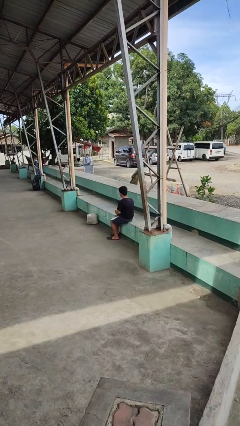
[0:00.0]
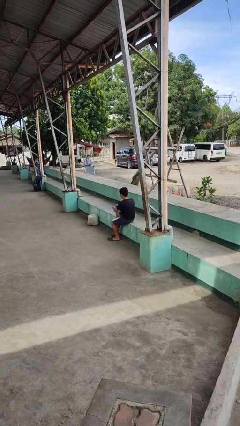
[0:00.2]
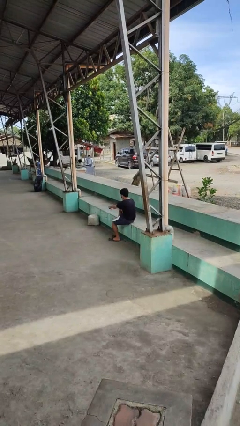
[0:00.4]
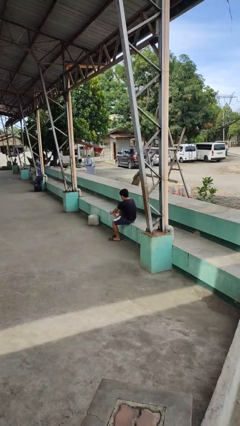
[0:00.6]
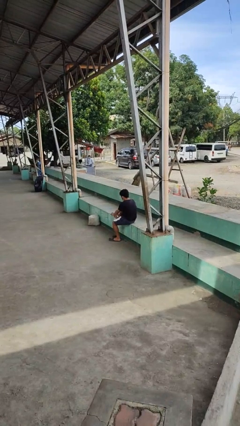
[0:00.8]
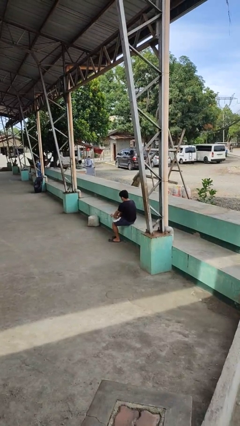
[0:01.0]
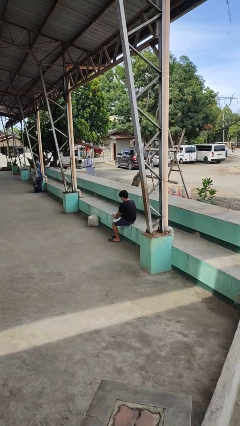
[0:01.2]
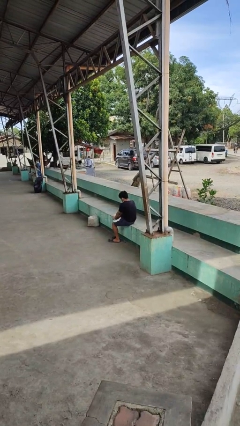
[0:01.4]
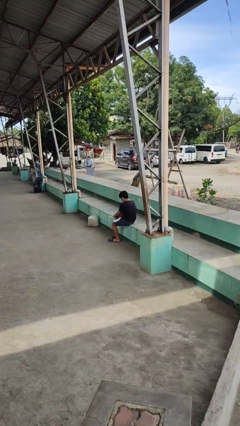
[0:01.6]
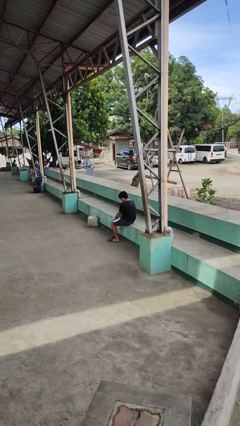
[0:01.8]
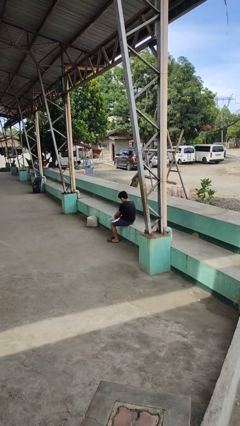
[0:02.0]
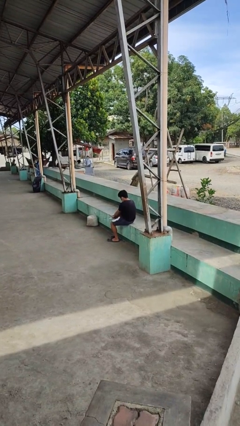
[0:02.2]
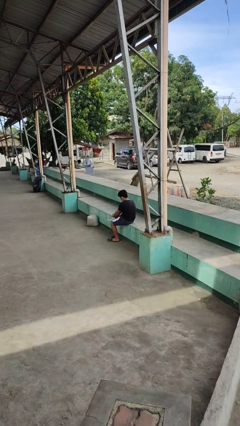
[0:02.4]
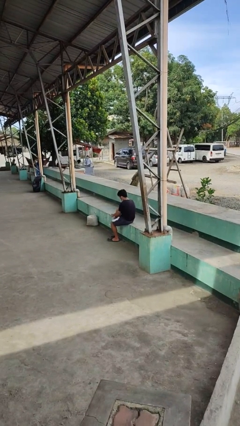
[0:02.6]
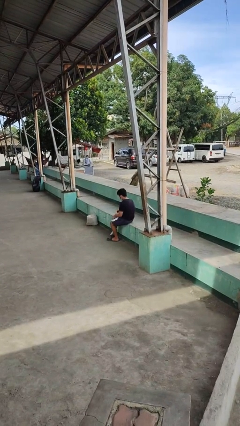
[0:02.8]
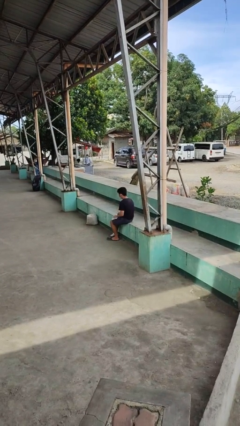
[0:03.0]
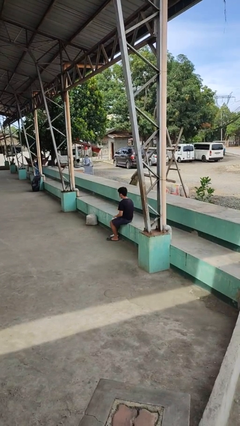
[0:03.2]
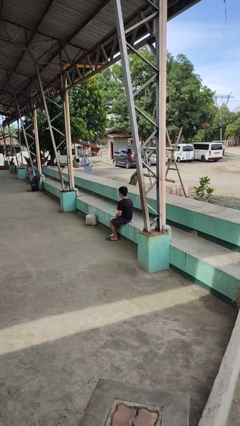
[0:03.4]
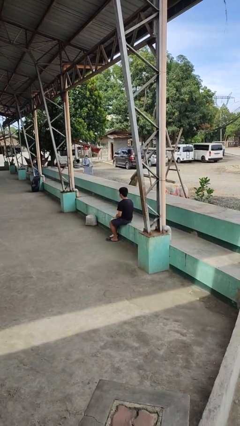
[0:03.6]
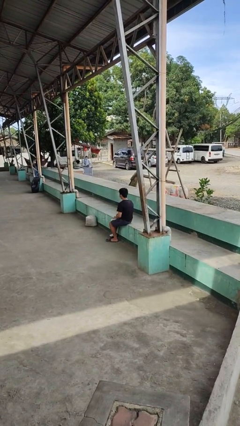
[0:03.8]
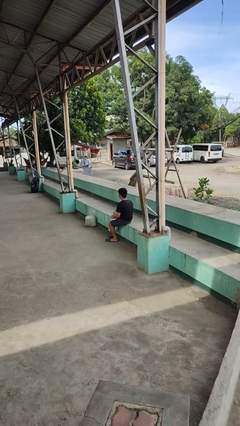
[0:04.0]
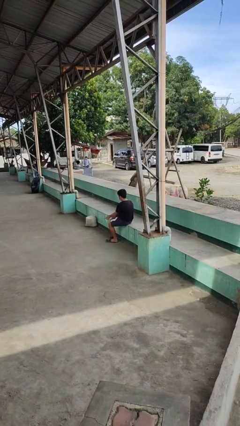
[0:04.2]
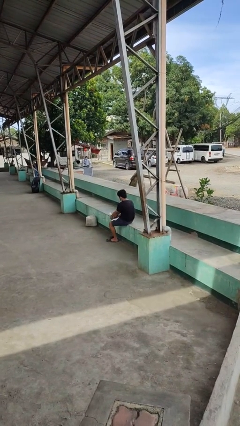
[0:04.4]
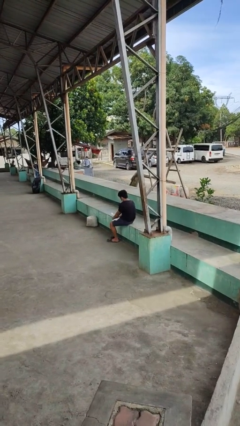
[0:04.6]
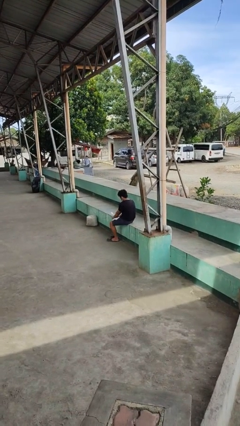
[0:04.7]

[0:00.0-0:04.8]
person puts on socks

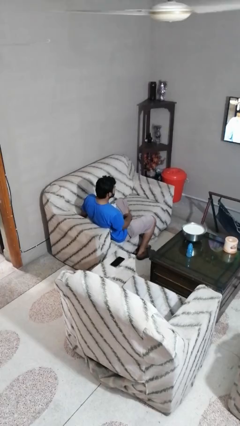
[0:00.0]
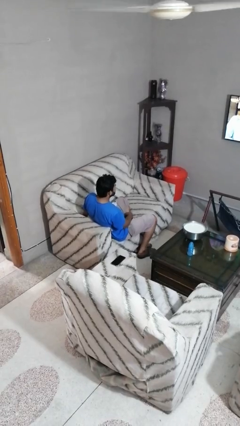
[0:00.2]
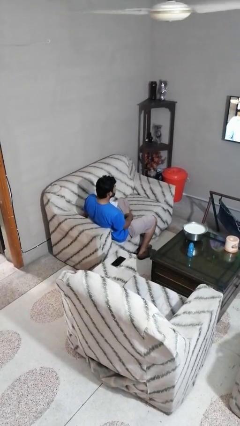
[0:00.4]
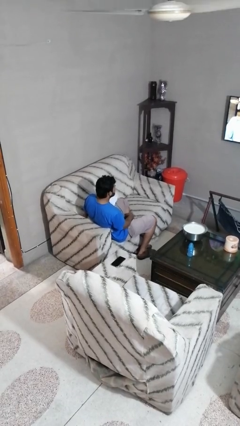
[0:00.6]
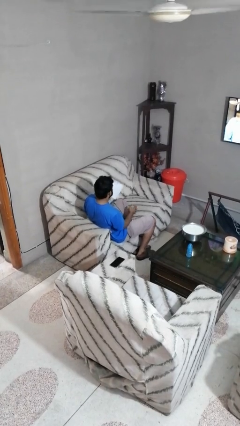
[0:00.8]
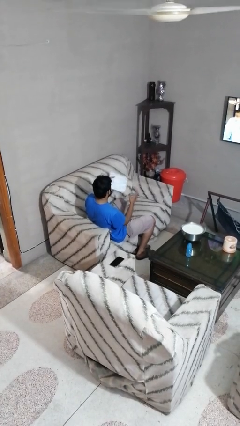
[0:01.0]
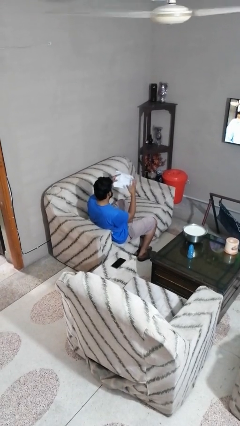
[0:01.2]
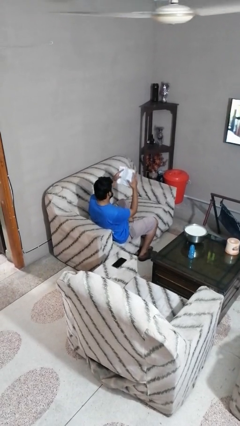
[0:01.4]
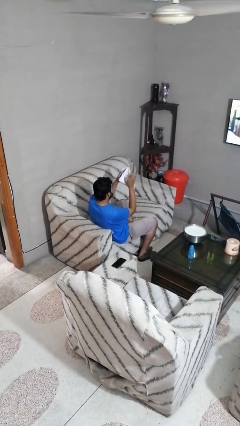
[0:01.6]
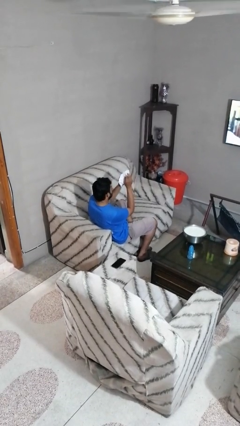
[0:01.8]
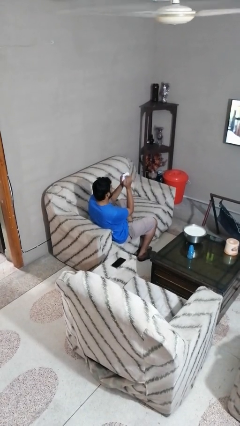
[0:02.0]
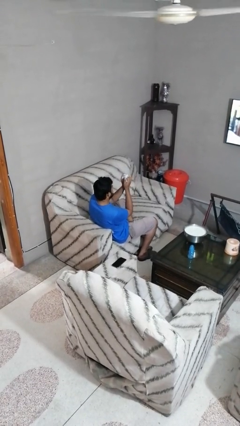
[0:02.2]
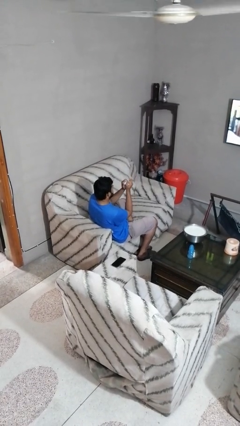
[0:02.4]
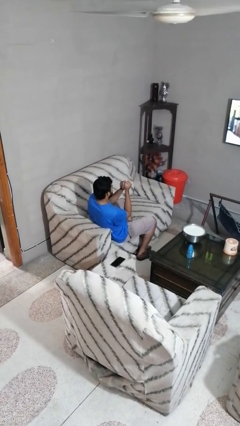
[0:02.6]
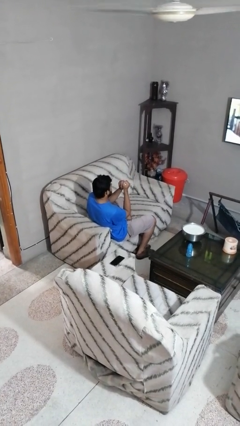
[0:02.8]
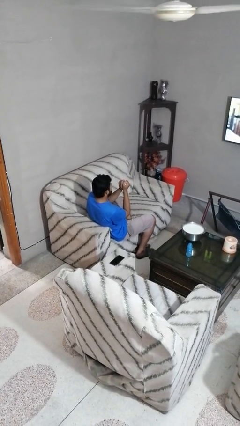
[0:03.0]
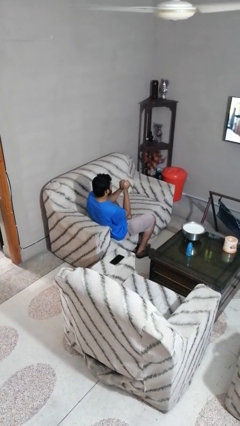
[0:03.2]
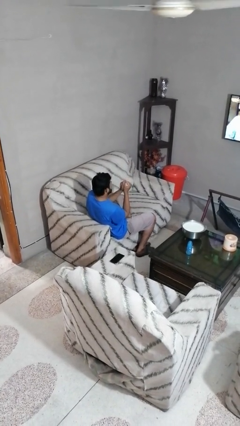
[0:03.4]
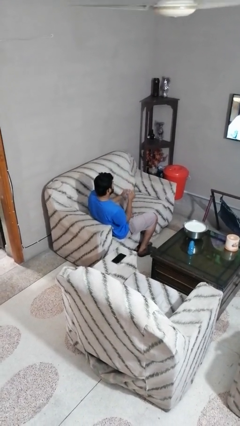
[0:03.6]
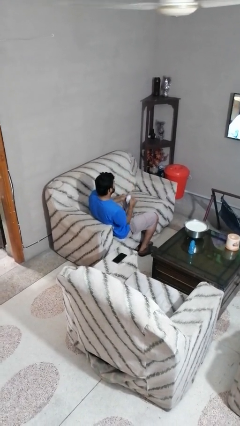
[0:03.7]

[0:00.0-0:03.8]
person crumples paper

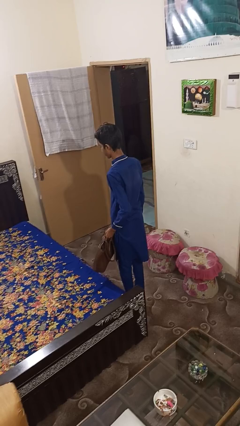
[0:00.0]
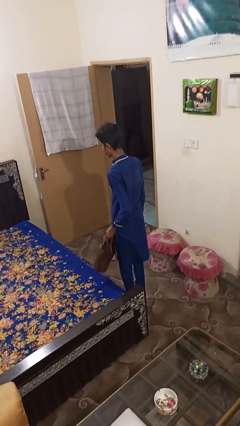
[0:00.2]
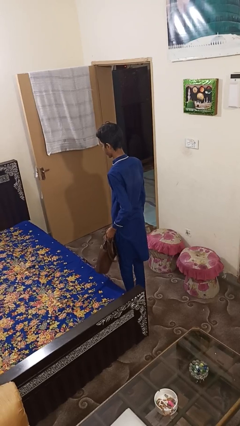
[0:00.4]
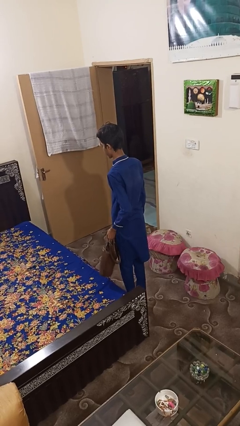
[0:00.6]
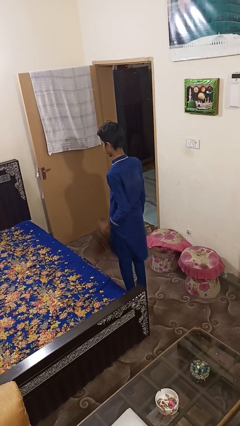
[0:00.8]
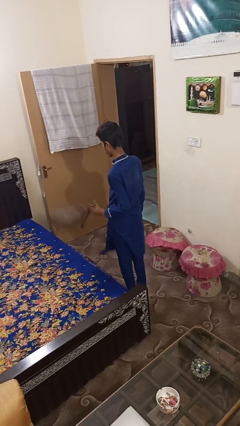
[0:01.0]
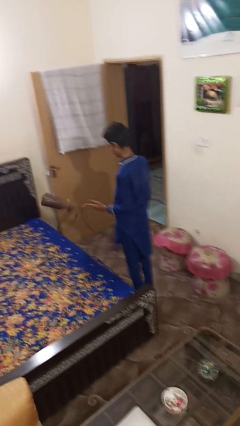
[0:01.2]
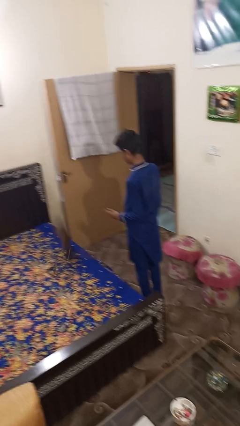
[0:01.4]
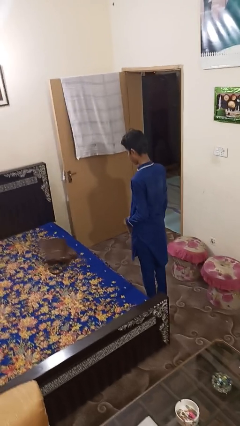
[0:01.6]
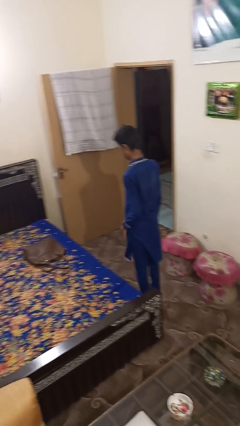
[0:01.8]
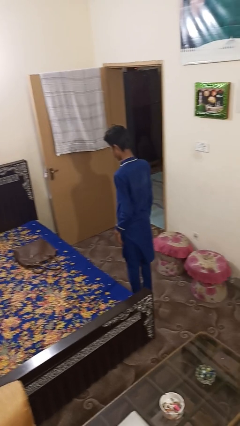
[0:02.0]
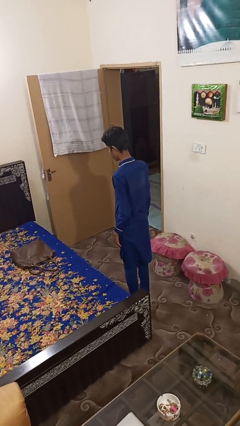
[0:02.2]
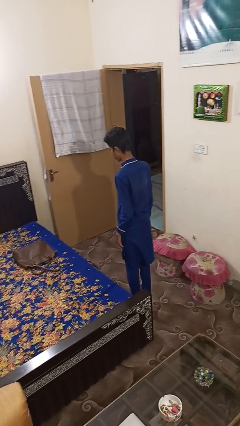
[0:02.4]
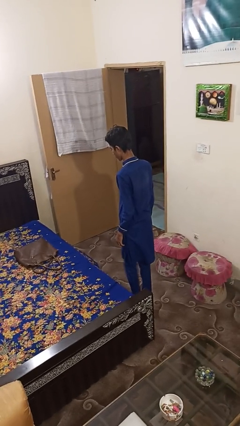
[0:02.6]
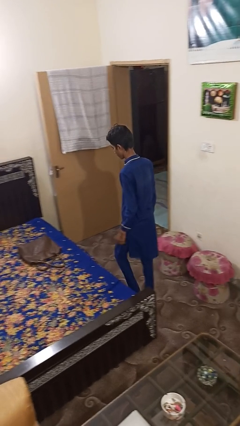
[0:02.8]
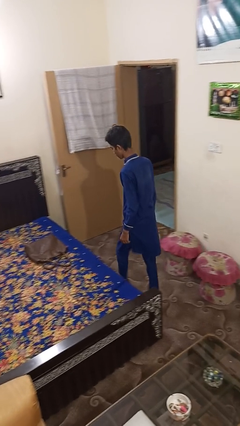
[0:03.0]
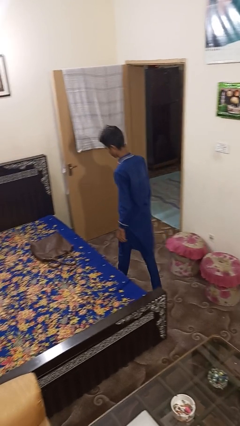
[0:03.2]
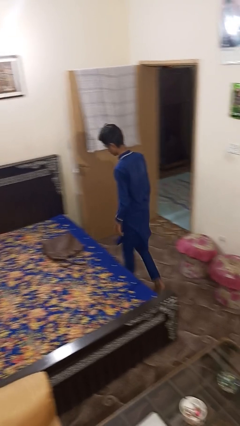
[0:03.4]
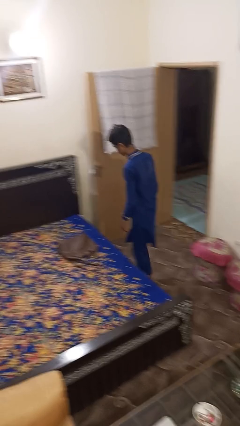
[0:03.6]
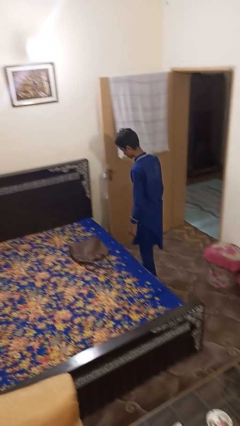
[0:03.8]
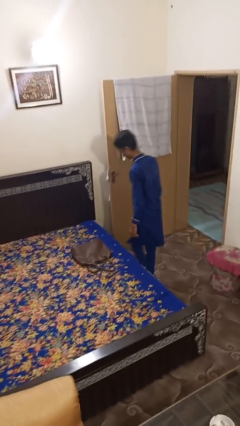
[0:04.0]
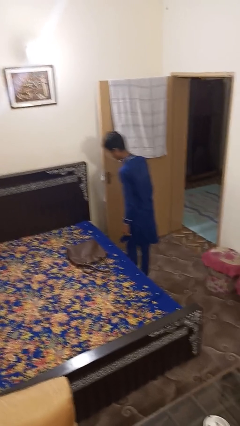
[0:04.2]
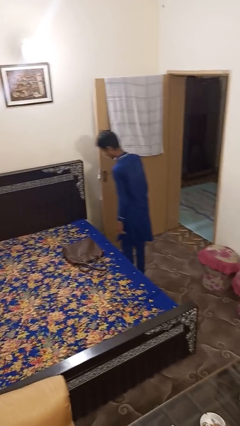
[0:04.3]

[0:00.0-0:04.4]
person throws object on bed

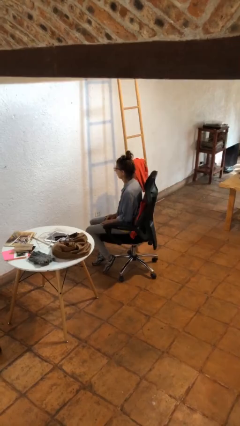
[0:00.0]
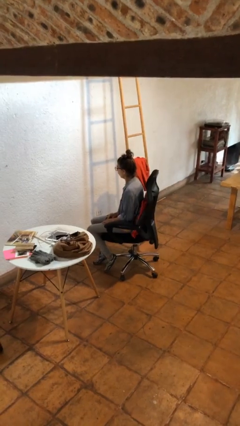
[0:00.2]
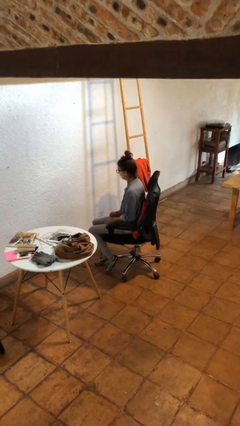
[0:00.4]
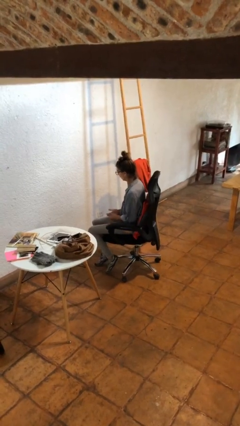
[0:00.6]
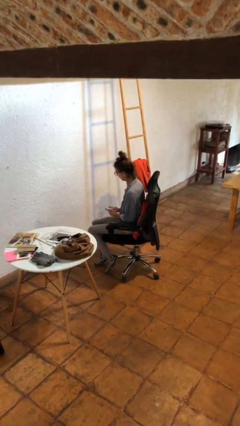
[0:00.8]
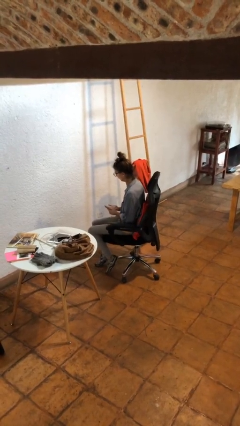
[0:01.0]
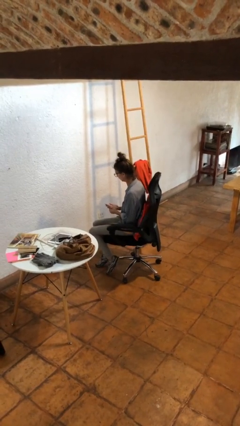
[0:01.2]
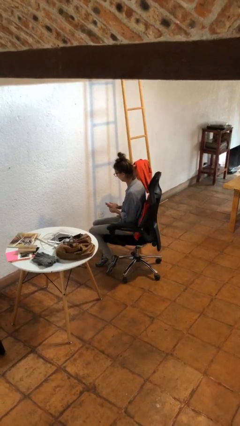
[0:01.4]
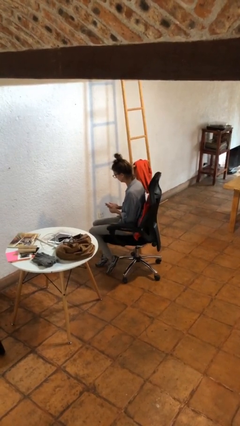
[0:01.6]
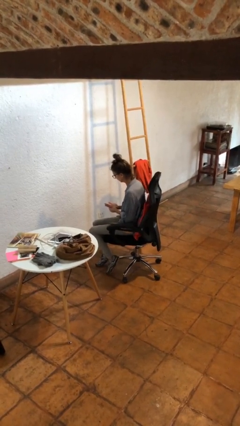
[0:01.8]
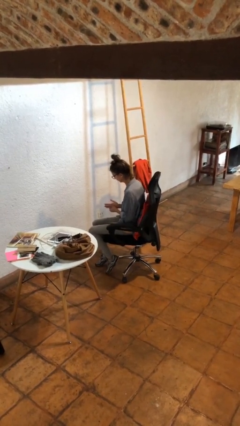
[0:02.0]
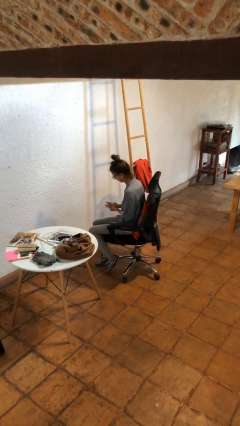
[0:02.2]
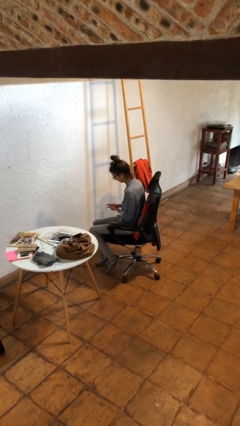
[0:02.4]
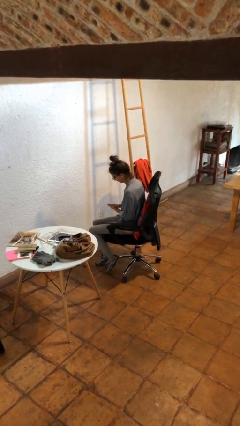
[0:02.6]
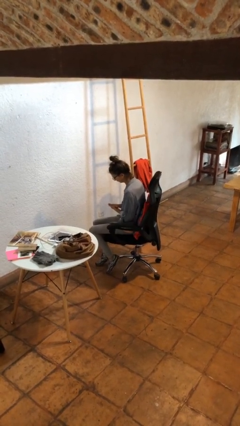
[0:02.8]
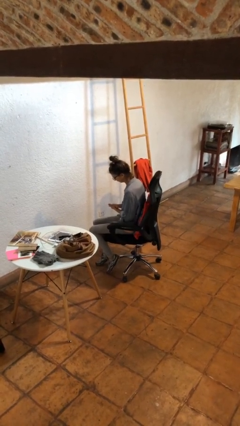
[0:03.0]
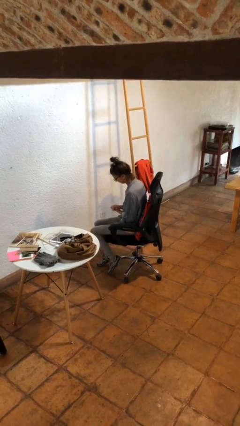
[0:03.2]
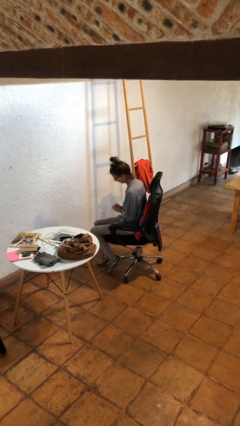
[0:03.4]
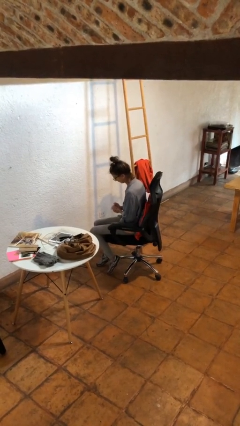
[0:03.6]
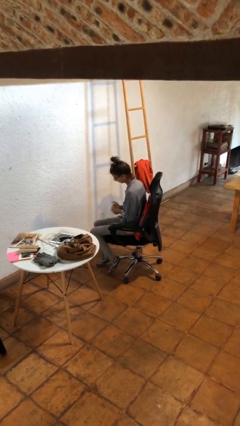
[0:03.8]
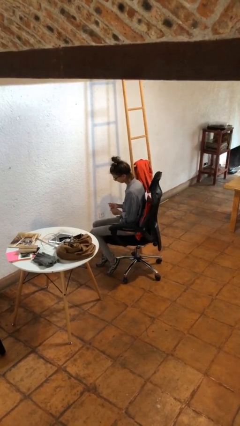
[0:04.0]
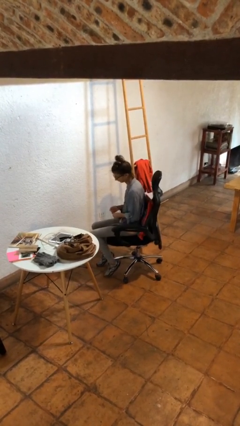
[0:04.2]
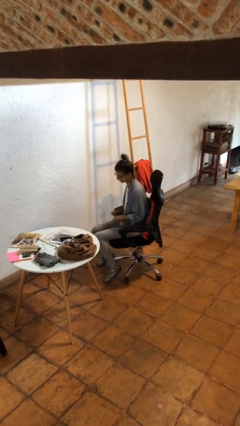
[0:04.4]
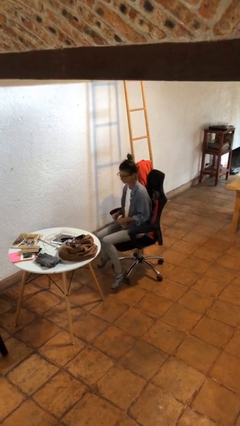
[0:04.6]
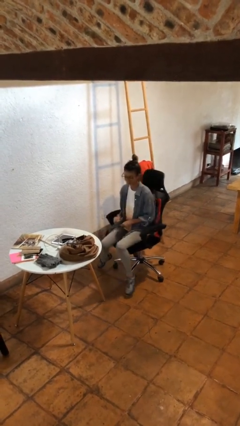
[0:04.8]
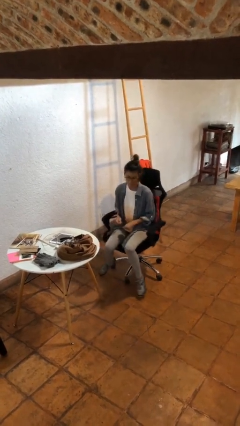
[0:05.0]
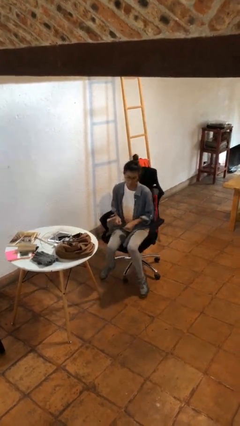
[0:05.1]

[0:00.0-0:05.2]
person looks at hands in lap
